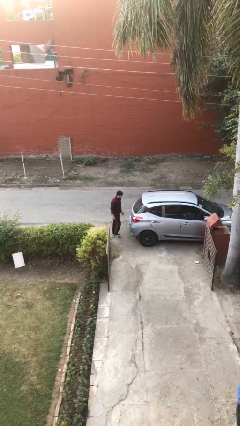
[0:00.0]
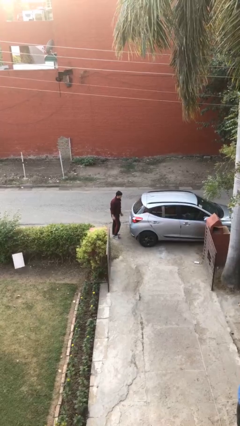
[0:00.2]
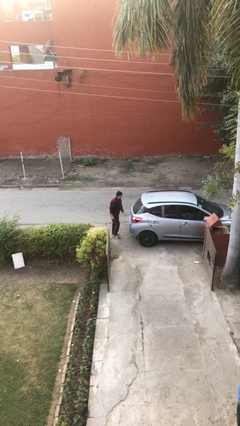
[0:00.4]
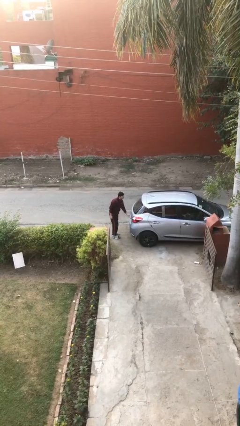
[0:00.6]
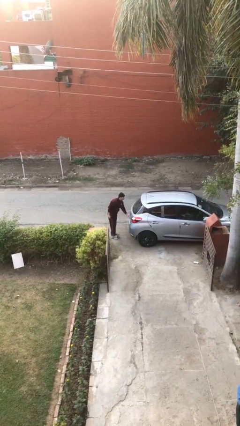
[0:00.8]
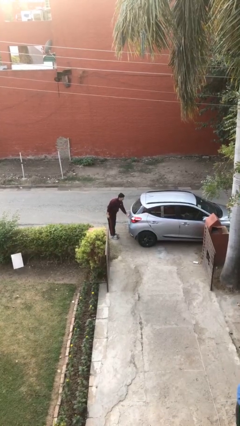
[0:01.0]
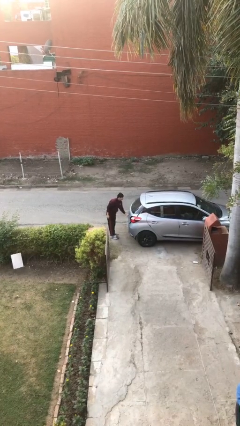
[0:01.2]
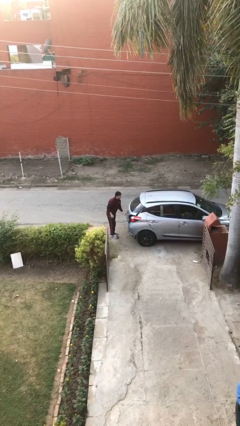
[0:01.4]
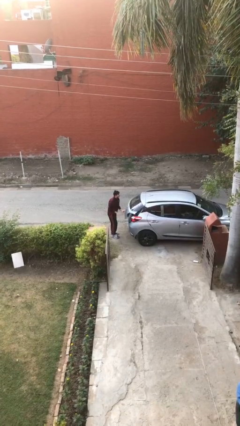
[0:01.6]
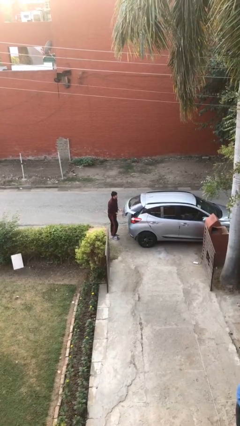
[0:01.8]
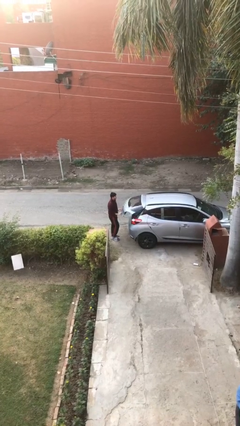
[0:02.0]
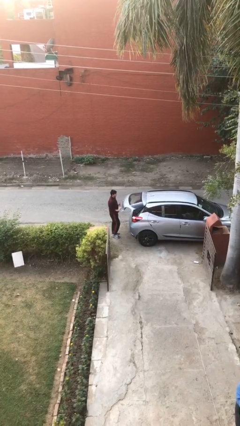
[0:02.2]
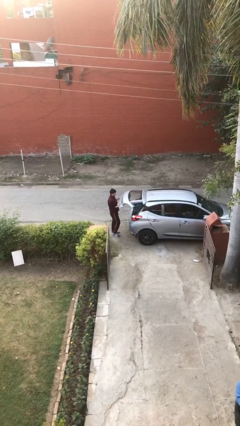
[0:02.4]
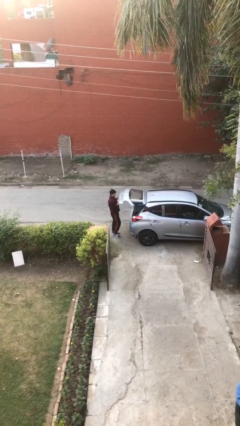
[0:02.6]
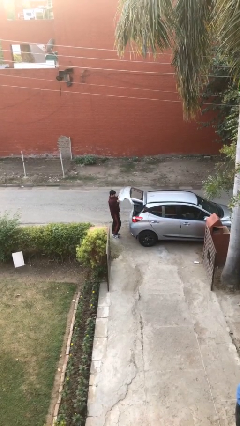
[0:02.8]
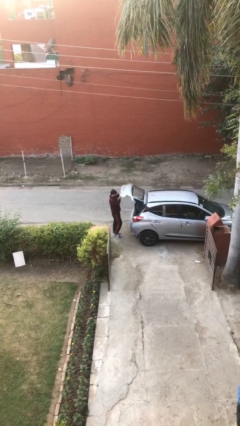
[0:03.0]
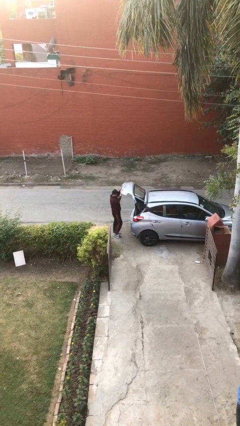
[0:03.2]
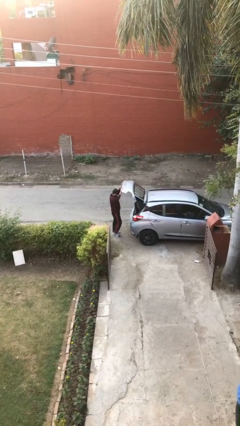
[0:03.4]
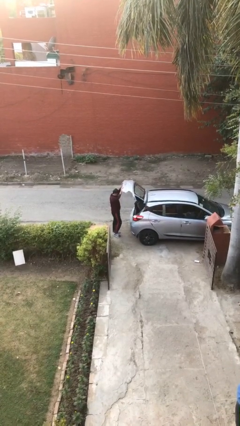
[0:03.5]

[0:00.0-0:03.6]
person opens car trunk

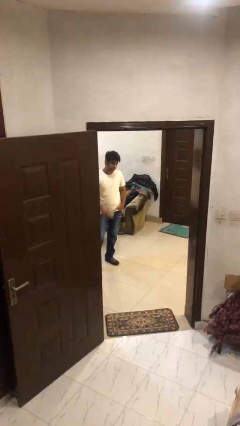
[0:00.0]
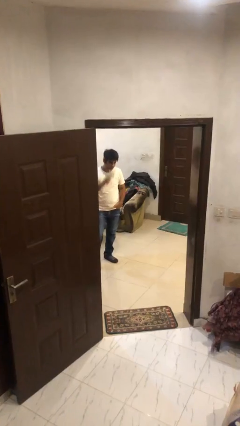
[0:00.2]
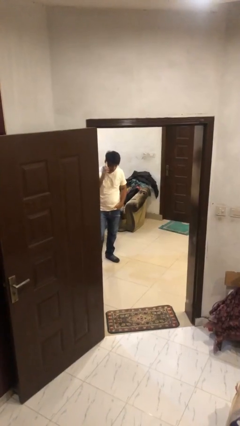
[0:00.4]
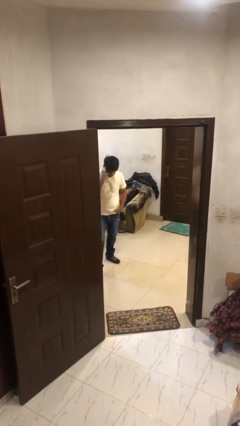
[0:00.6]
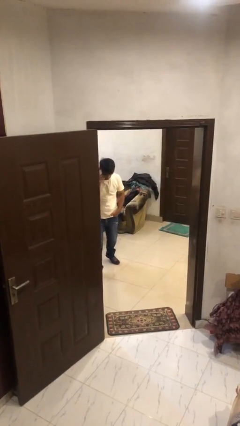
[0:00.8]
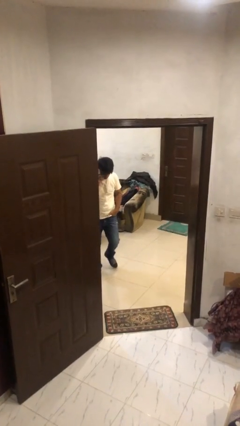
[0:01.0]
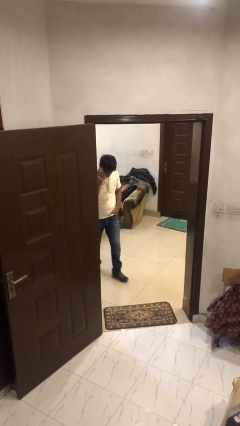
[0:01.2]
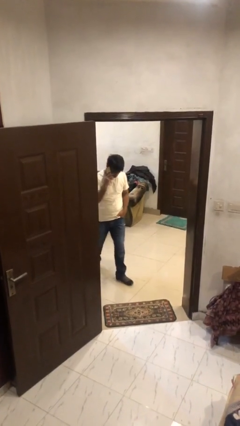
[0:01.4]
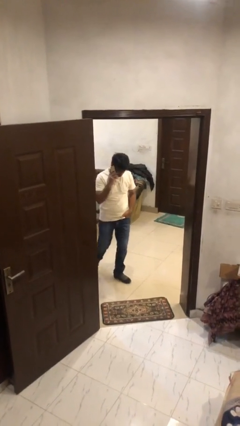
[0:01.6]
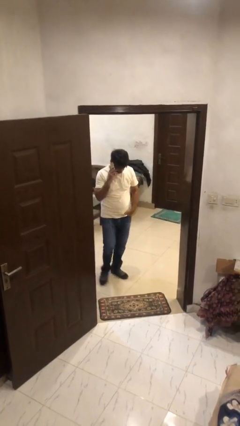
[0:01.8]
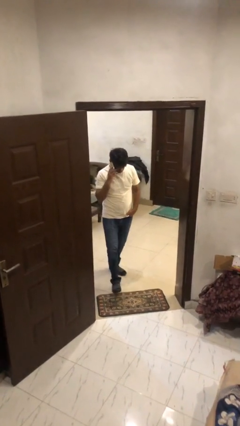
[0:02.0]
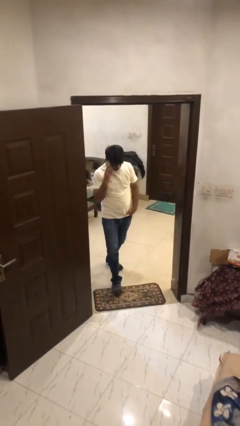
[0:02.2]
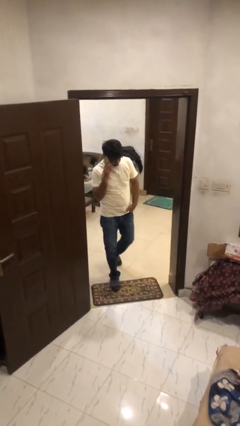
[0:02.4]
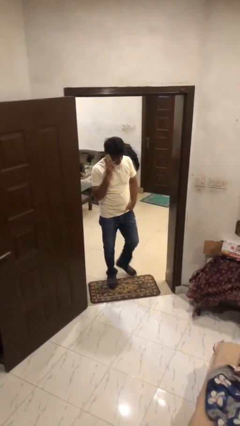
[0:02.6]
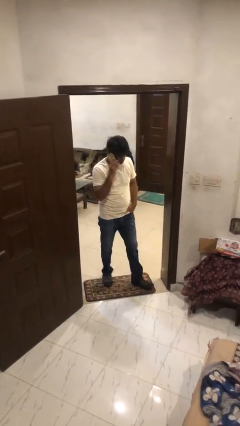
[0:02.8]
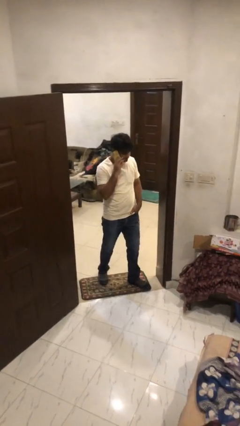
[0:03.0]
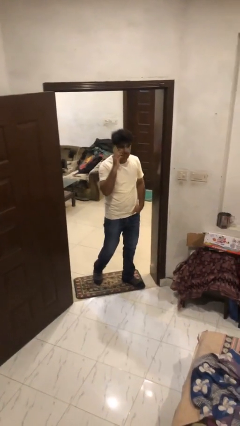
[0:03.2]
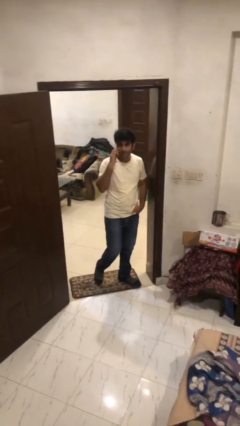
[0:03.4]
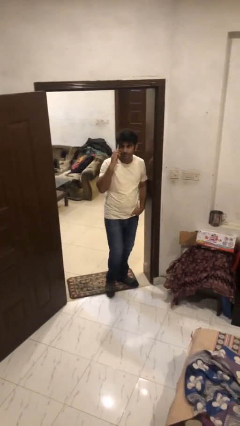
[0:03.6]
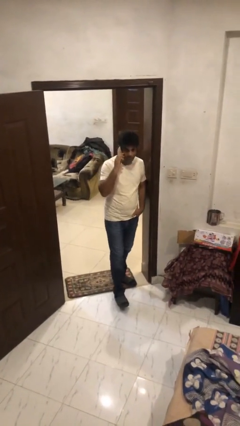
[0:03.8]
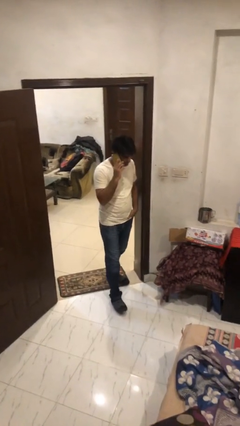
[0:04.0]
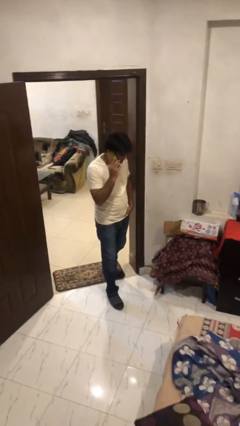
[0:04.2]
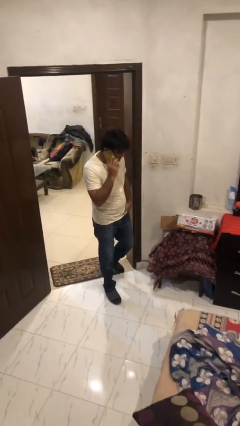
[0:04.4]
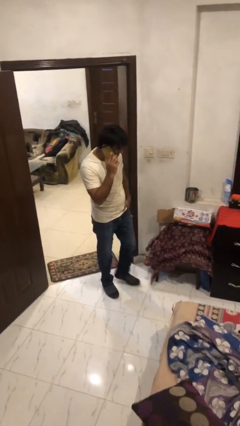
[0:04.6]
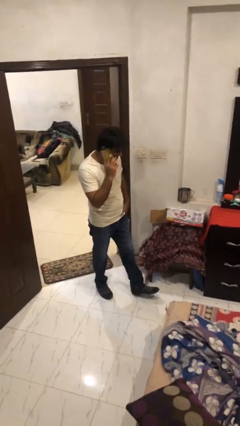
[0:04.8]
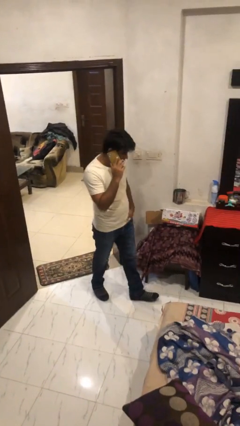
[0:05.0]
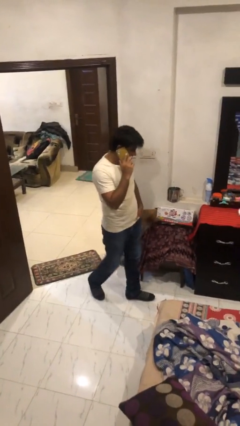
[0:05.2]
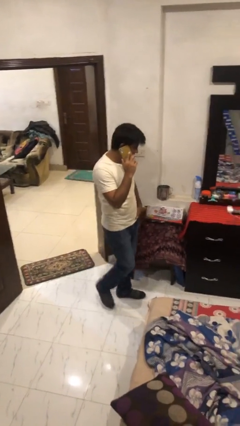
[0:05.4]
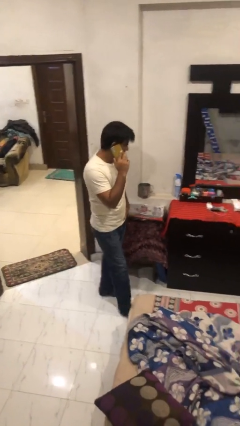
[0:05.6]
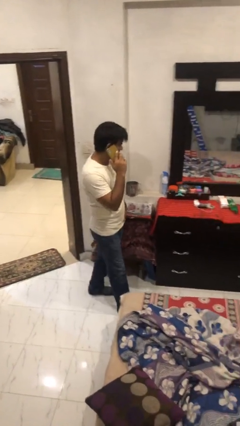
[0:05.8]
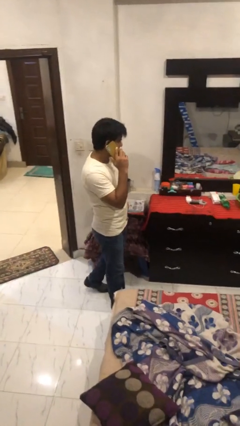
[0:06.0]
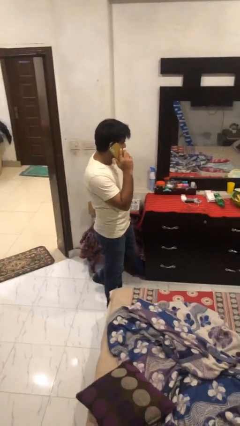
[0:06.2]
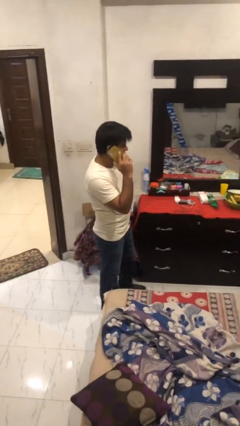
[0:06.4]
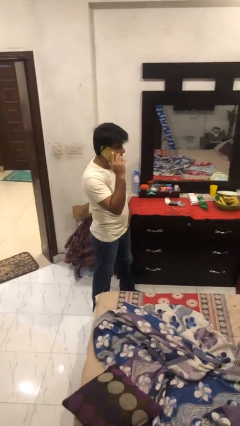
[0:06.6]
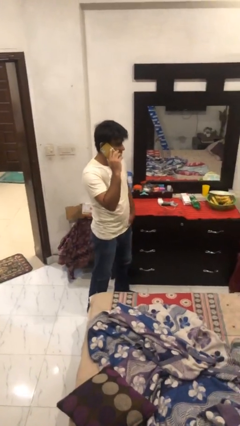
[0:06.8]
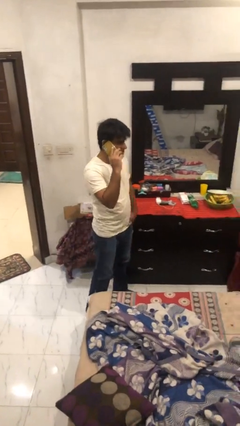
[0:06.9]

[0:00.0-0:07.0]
person enters scene through structure

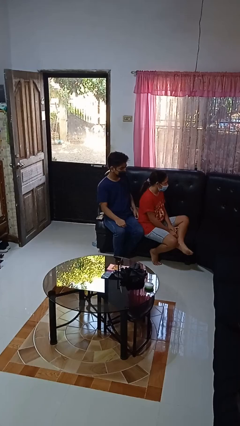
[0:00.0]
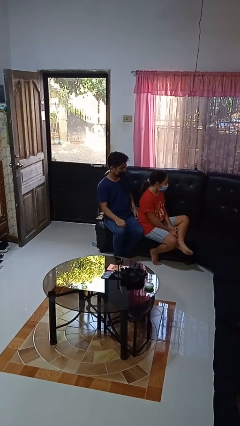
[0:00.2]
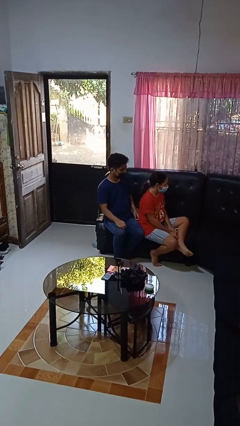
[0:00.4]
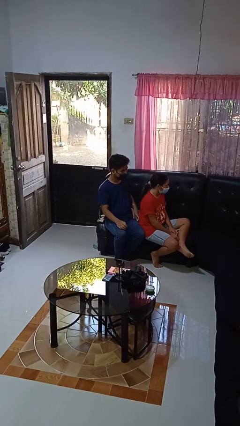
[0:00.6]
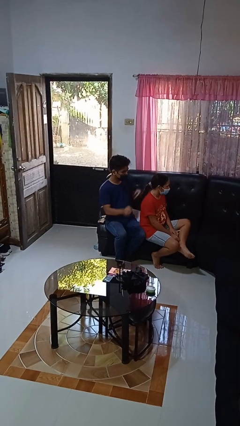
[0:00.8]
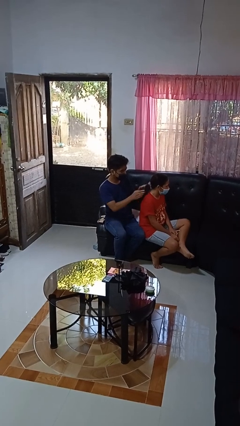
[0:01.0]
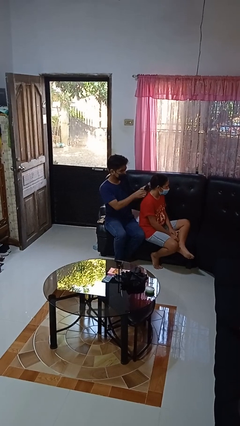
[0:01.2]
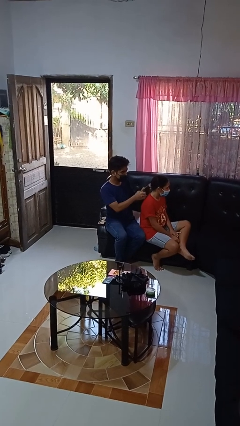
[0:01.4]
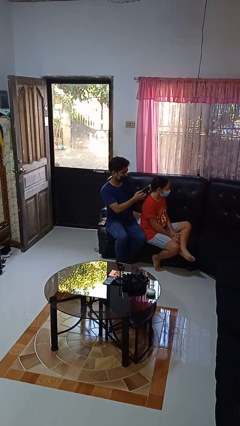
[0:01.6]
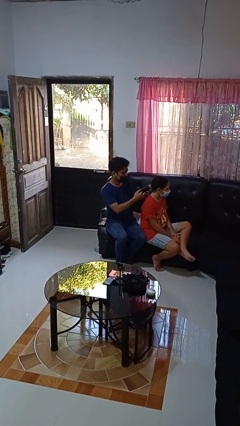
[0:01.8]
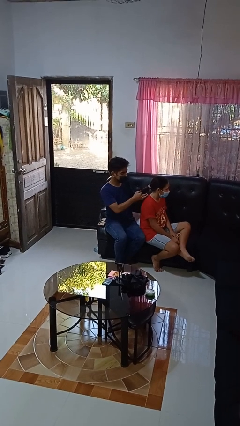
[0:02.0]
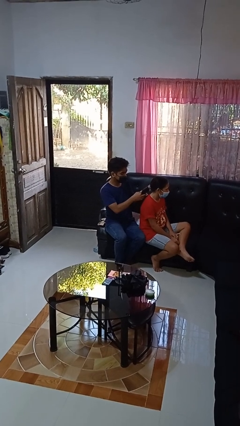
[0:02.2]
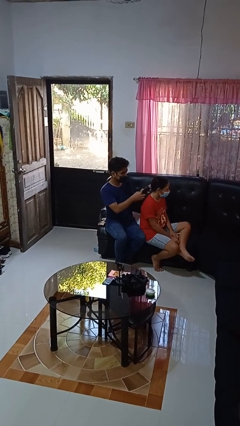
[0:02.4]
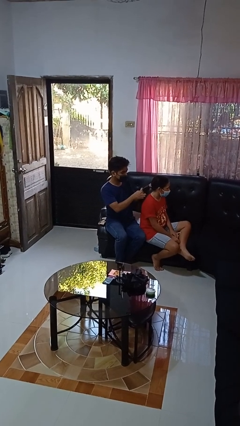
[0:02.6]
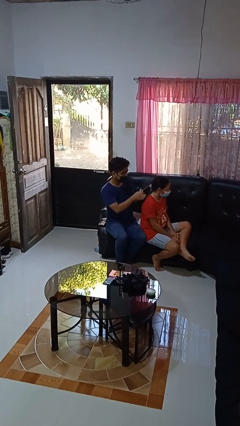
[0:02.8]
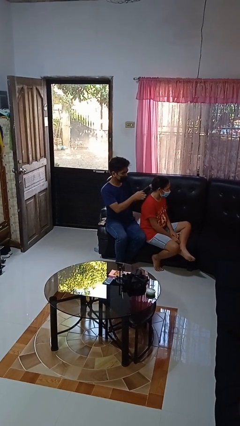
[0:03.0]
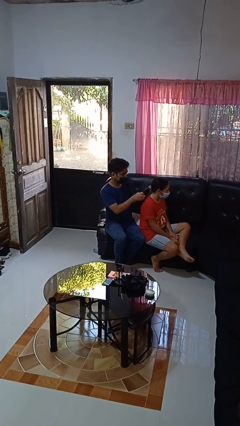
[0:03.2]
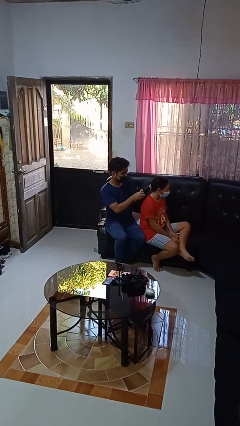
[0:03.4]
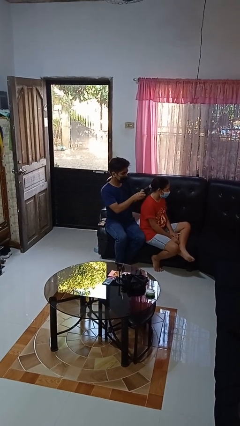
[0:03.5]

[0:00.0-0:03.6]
person braids hair of person

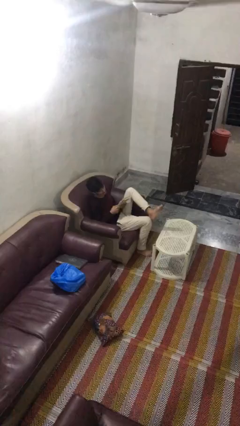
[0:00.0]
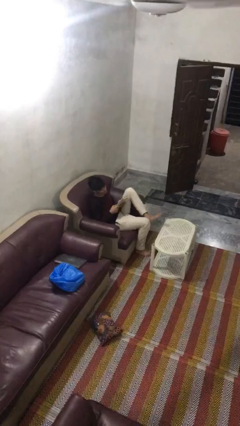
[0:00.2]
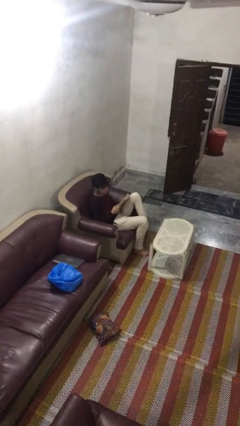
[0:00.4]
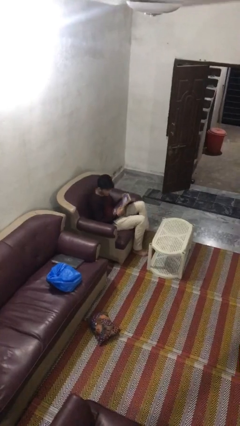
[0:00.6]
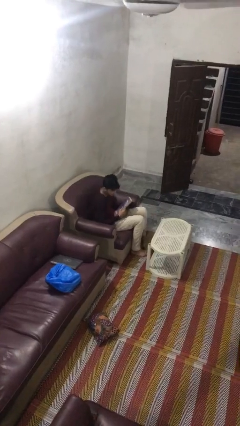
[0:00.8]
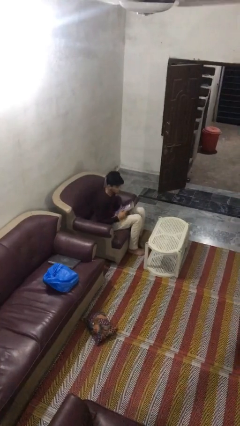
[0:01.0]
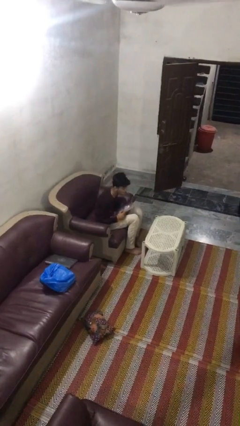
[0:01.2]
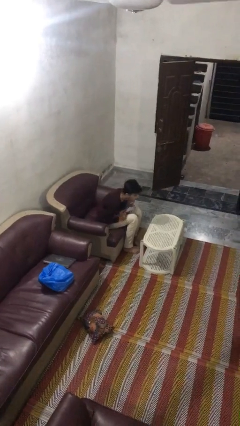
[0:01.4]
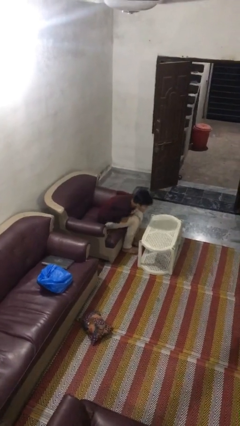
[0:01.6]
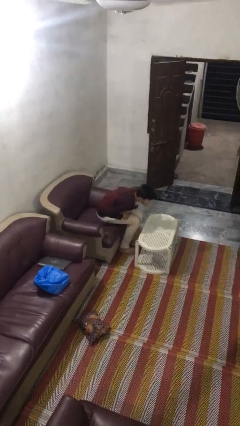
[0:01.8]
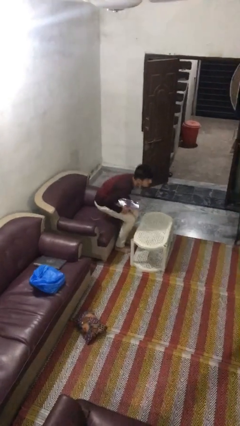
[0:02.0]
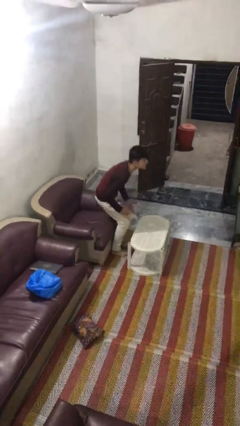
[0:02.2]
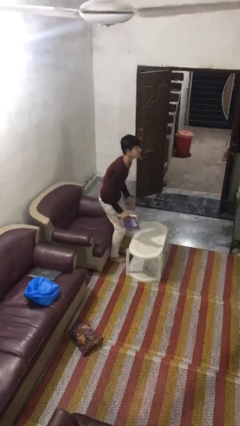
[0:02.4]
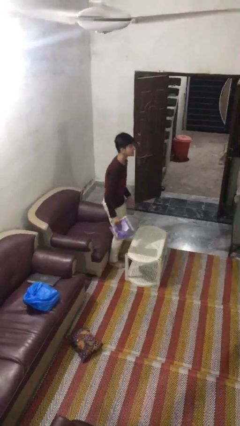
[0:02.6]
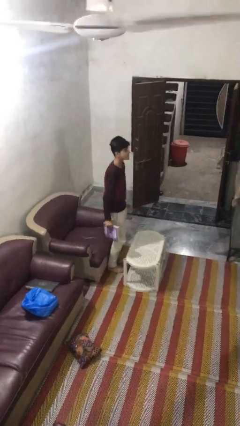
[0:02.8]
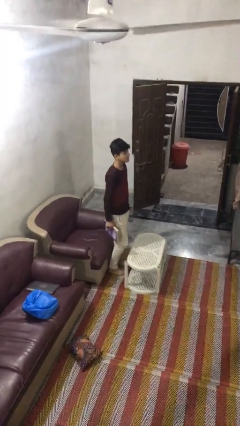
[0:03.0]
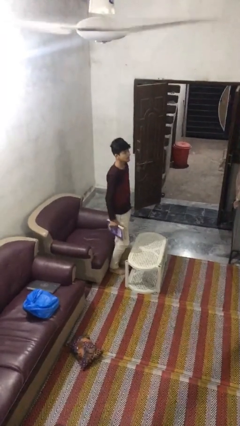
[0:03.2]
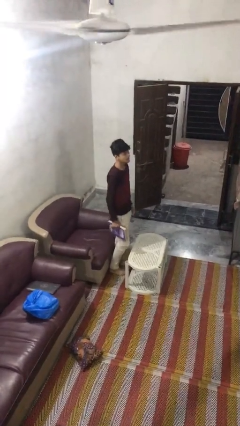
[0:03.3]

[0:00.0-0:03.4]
person stands up

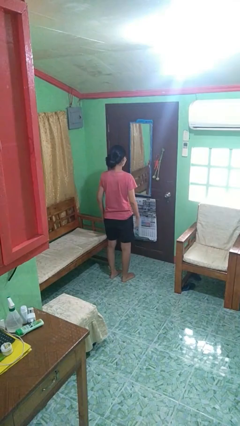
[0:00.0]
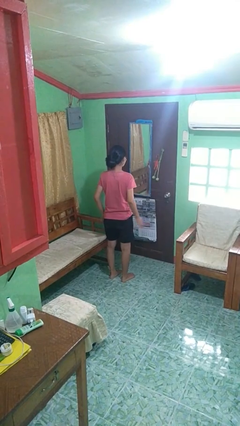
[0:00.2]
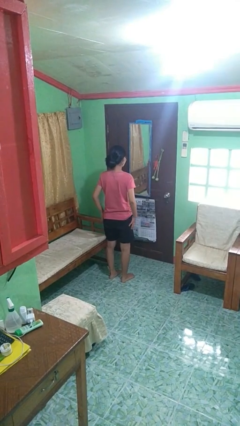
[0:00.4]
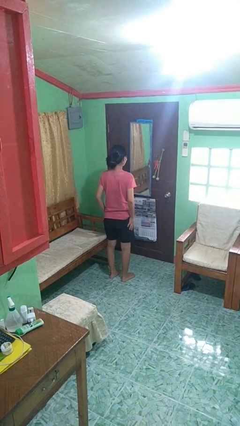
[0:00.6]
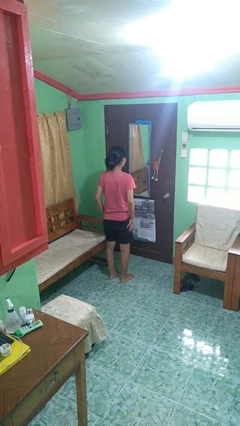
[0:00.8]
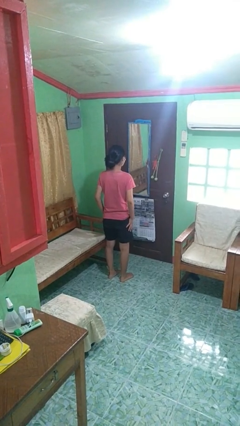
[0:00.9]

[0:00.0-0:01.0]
person slaps hands on thighs
